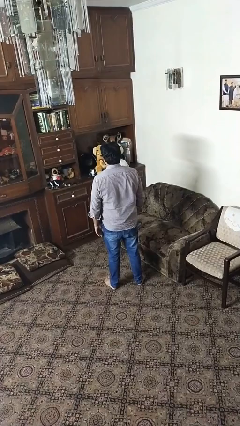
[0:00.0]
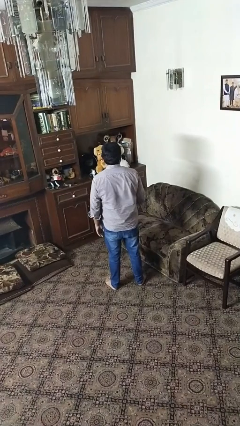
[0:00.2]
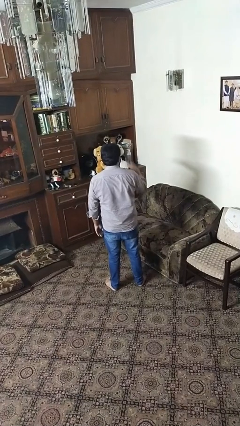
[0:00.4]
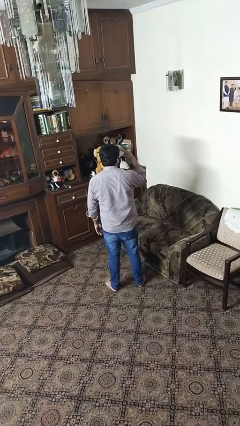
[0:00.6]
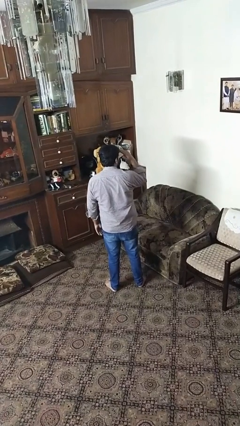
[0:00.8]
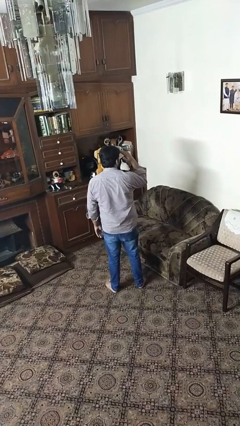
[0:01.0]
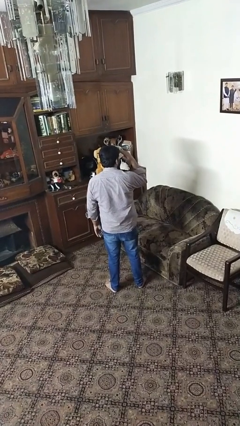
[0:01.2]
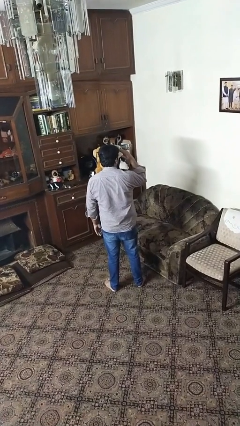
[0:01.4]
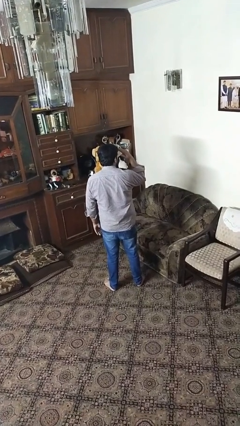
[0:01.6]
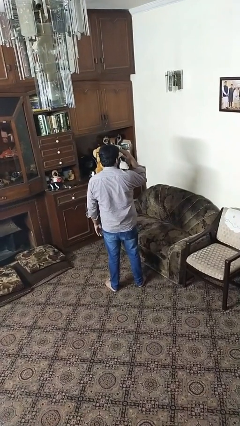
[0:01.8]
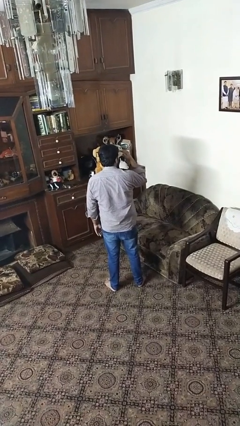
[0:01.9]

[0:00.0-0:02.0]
person salutes

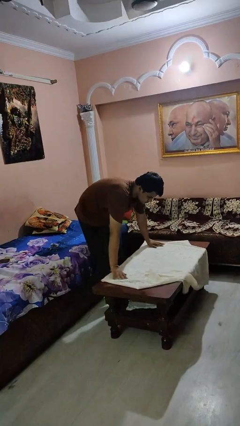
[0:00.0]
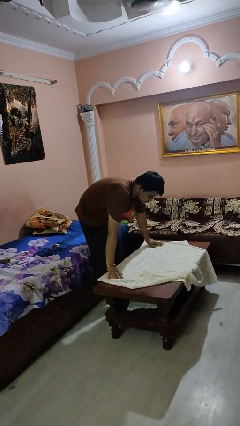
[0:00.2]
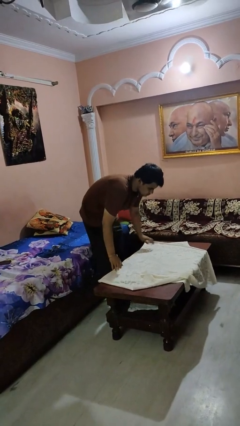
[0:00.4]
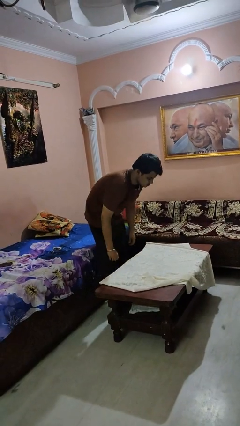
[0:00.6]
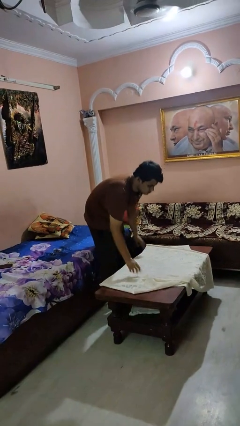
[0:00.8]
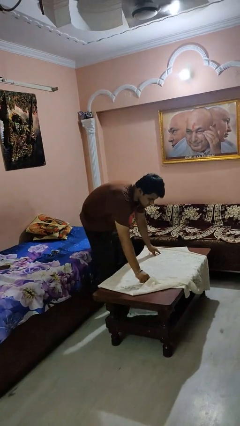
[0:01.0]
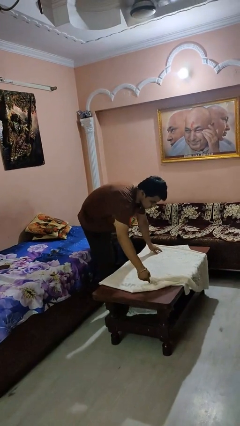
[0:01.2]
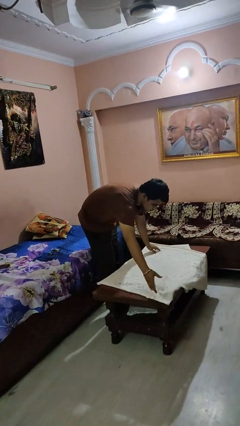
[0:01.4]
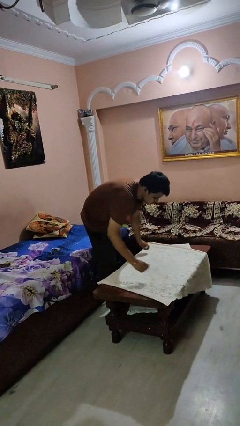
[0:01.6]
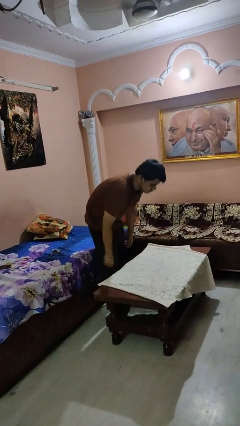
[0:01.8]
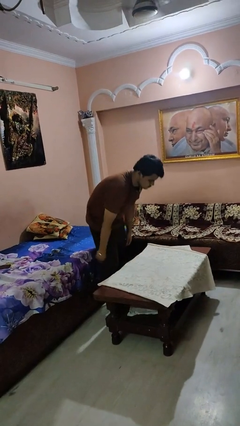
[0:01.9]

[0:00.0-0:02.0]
person spreads tablecloth

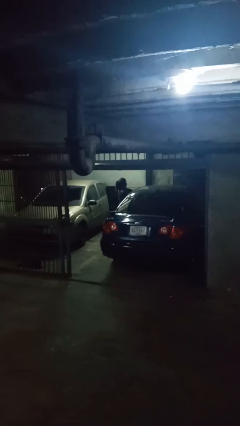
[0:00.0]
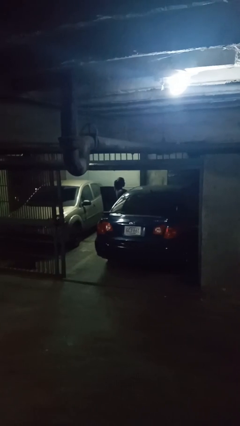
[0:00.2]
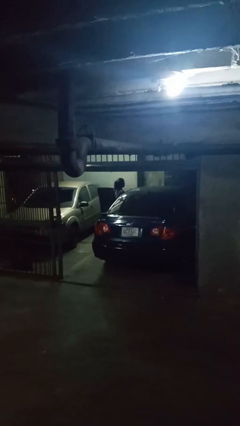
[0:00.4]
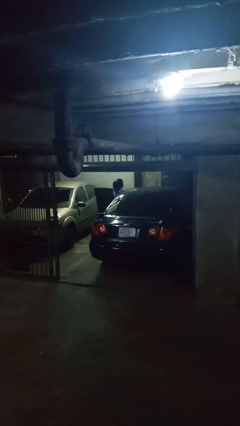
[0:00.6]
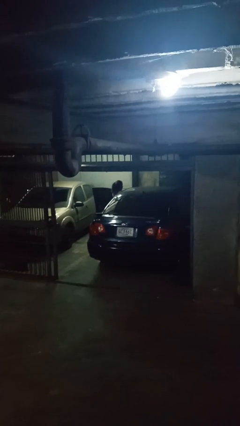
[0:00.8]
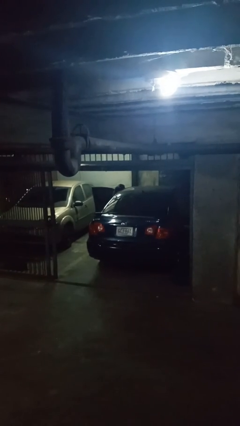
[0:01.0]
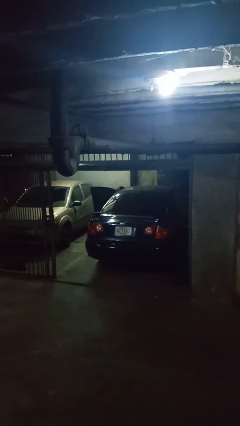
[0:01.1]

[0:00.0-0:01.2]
person enters car

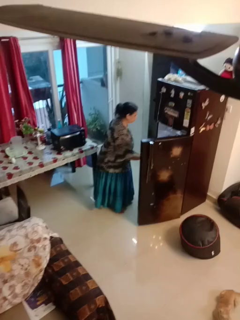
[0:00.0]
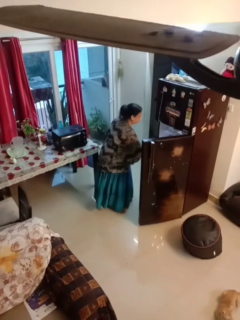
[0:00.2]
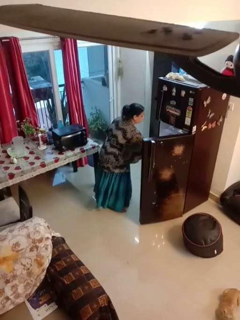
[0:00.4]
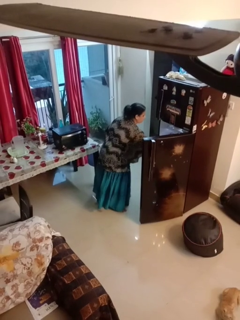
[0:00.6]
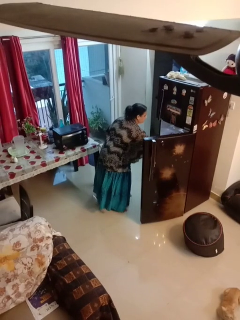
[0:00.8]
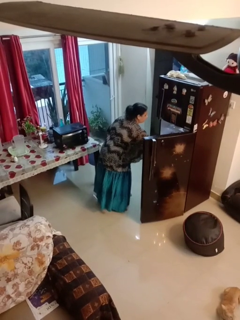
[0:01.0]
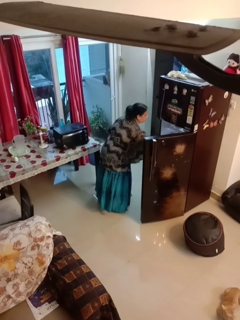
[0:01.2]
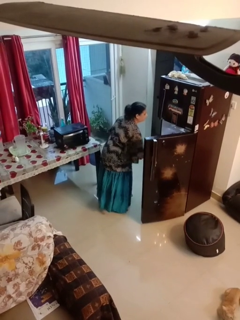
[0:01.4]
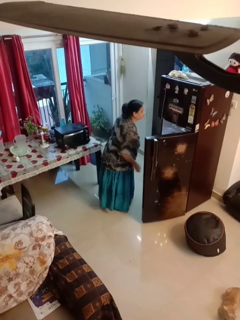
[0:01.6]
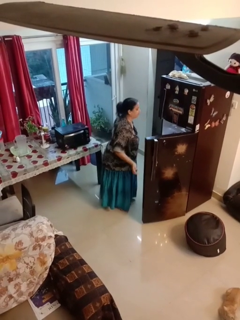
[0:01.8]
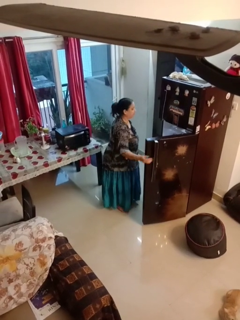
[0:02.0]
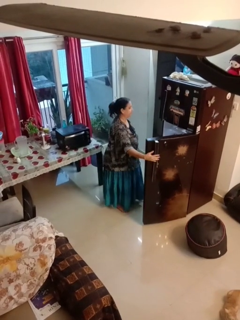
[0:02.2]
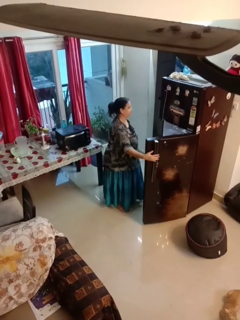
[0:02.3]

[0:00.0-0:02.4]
person puts object into refrigerator

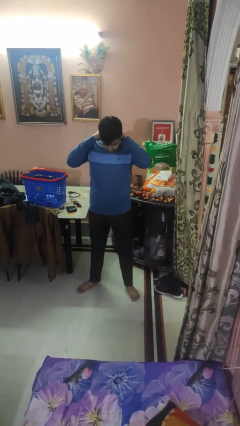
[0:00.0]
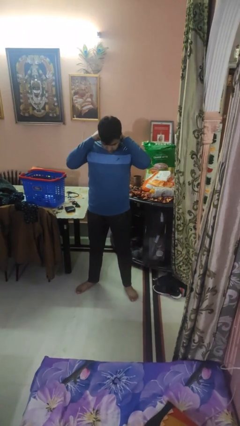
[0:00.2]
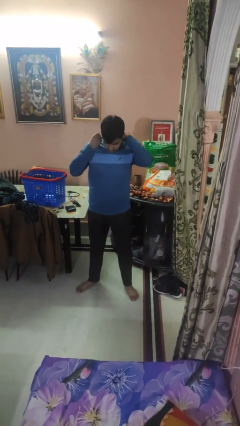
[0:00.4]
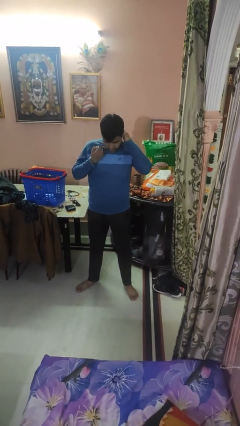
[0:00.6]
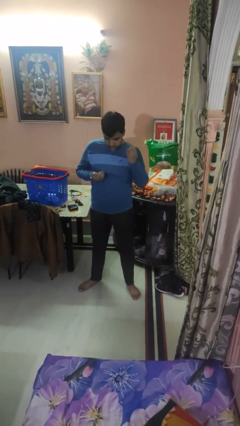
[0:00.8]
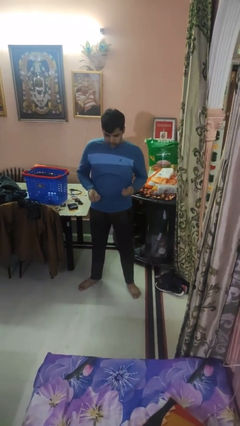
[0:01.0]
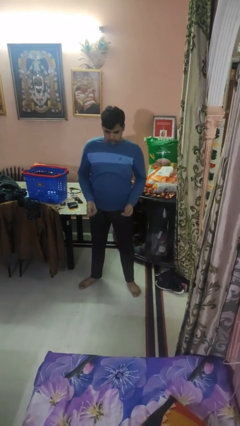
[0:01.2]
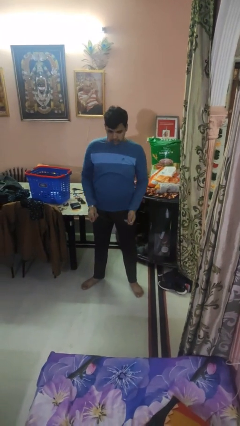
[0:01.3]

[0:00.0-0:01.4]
person takes off necklace

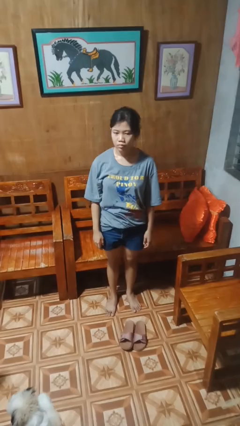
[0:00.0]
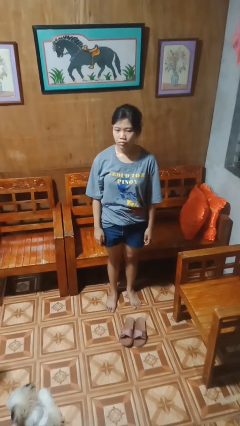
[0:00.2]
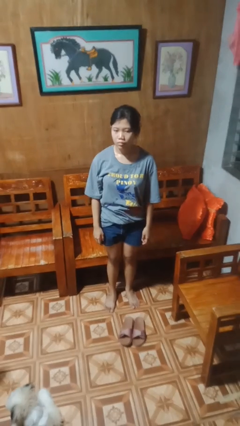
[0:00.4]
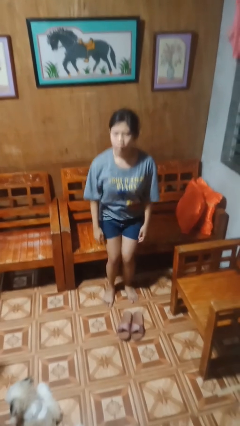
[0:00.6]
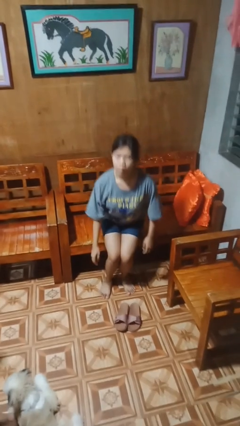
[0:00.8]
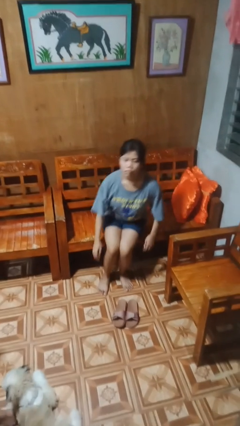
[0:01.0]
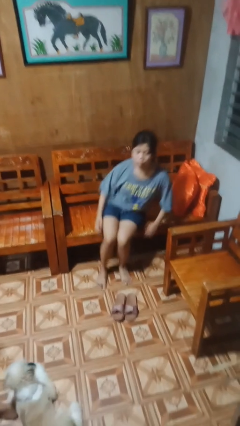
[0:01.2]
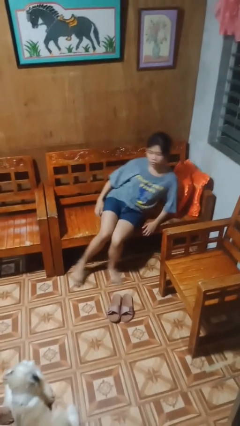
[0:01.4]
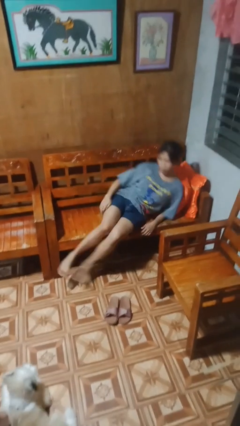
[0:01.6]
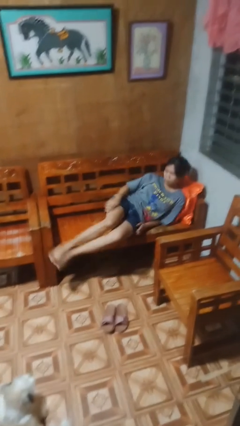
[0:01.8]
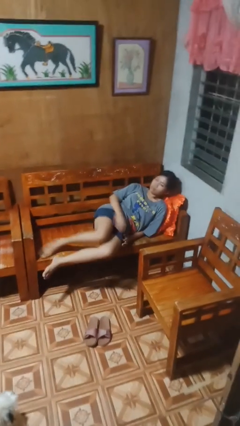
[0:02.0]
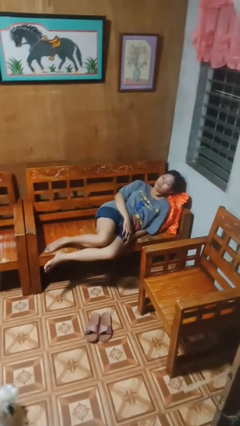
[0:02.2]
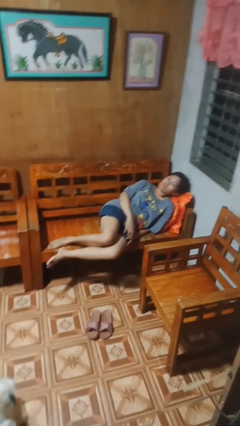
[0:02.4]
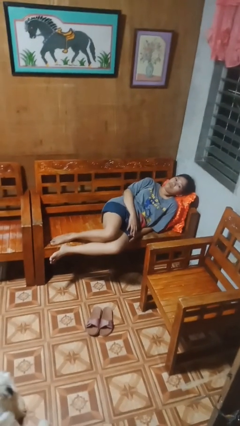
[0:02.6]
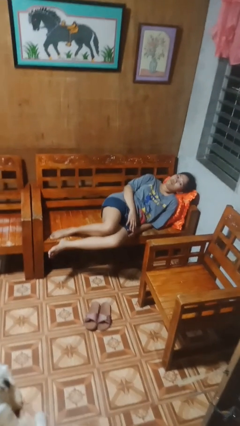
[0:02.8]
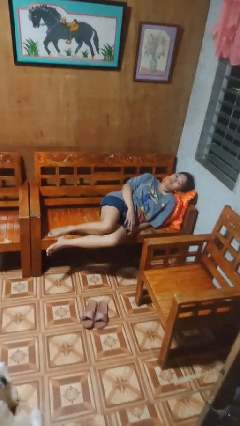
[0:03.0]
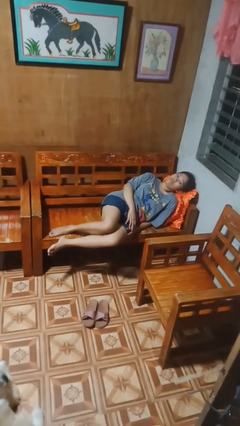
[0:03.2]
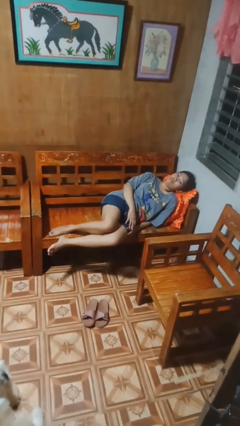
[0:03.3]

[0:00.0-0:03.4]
person lies down on couch

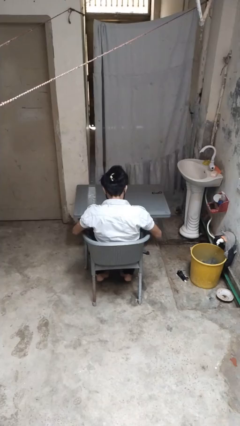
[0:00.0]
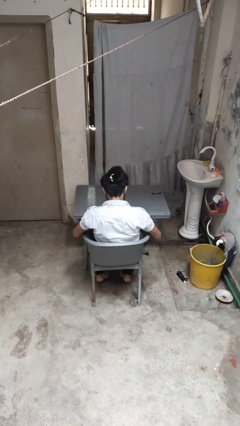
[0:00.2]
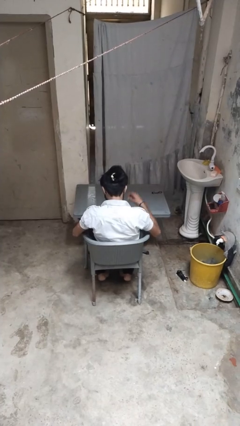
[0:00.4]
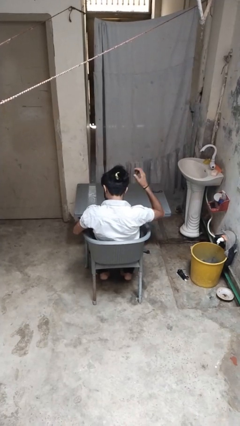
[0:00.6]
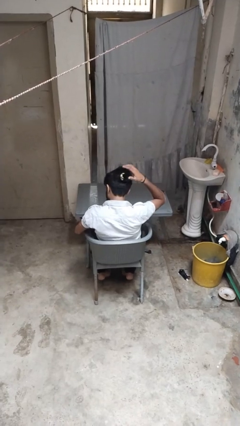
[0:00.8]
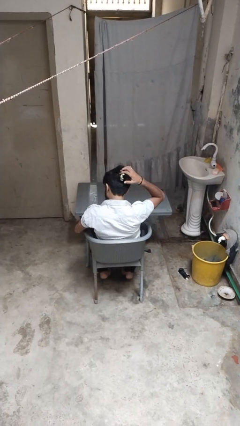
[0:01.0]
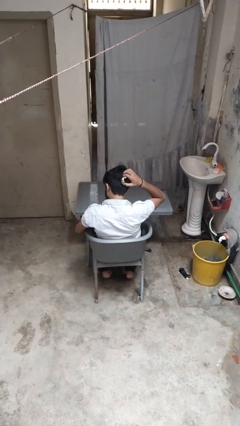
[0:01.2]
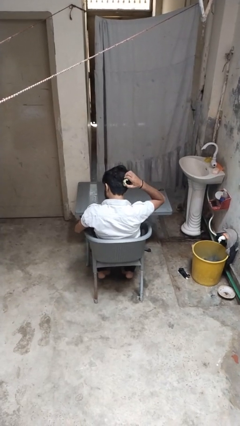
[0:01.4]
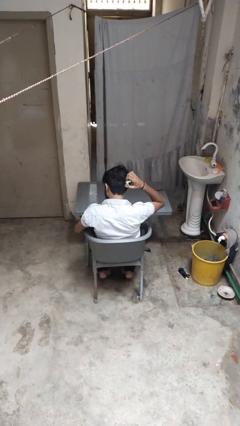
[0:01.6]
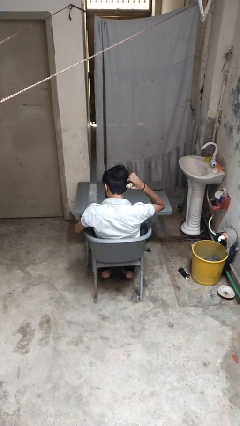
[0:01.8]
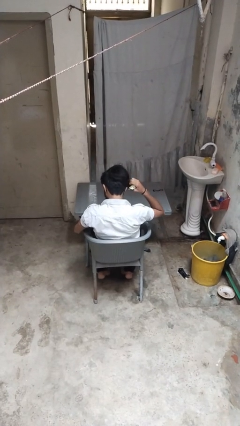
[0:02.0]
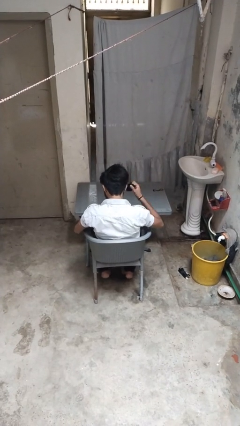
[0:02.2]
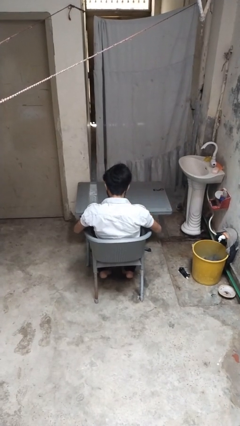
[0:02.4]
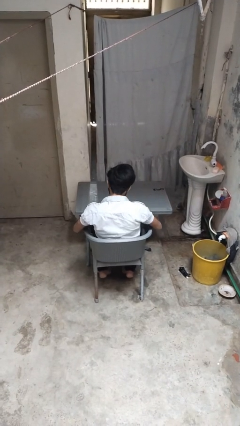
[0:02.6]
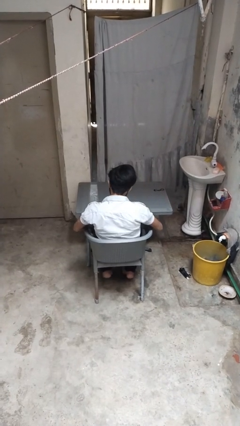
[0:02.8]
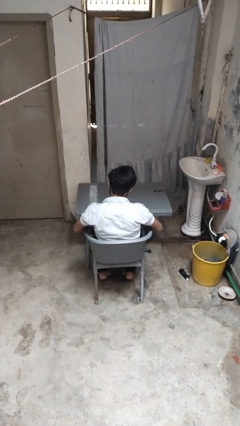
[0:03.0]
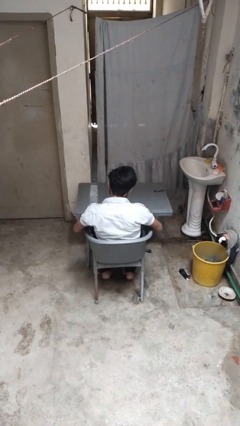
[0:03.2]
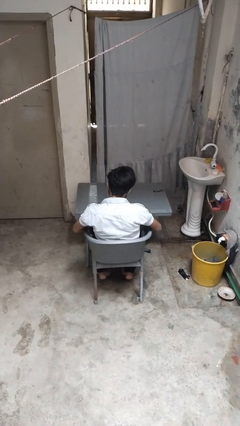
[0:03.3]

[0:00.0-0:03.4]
person takes off hairtie

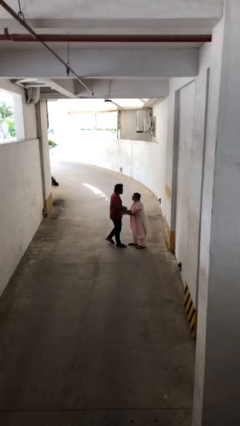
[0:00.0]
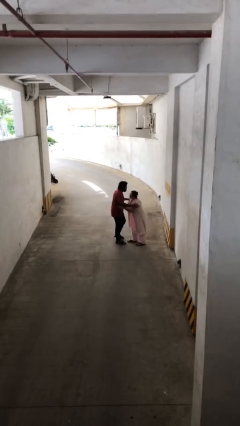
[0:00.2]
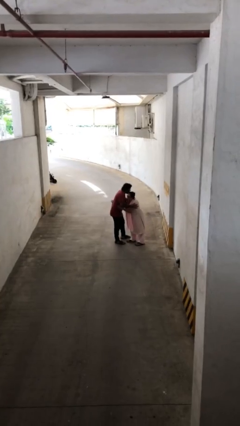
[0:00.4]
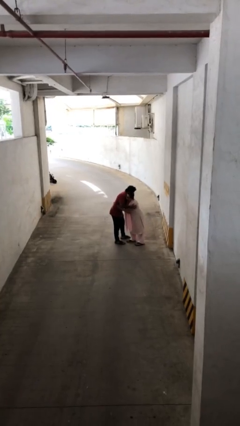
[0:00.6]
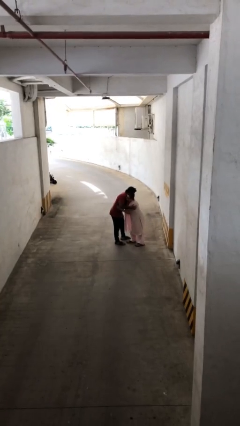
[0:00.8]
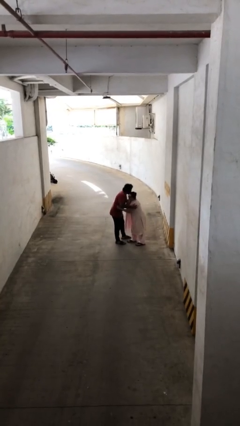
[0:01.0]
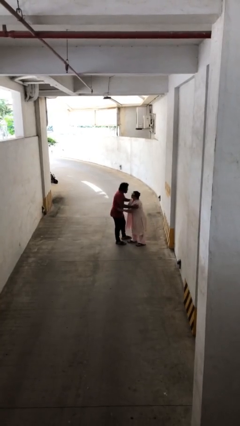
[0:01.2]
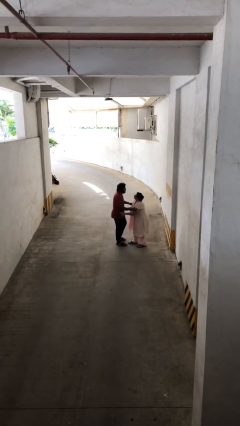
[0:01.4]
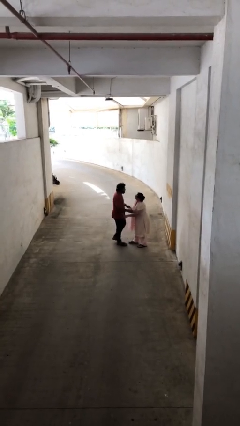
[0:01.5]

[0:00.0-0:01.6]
person embraces person
